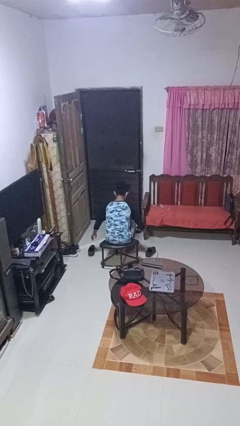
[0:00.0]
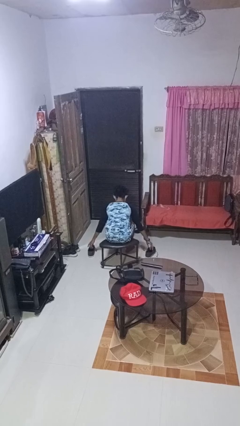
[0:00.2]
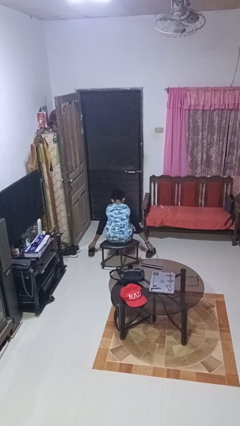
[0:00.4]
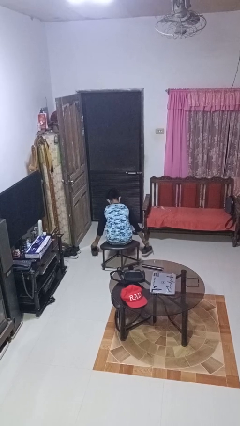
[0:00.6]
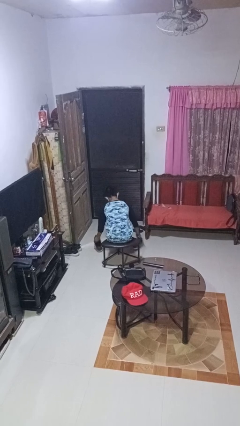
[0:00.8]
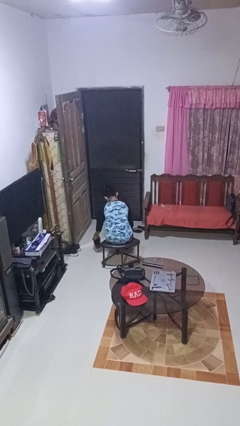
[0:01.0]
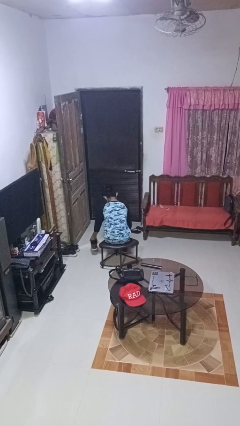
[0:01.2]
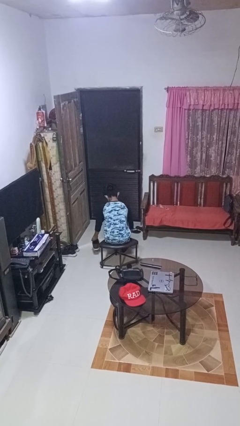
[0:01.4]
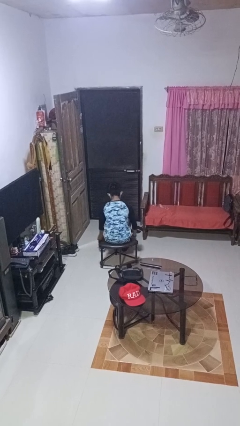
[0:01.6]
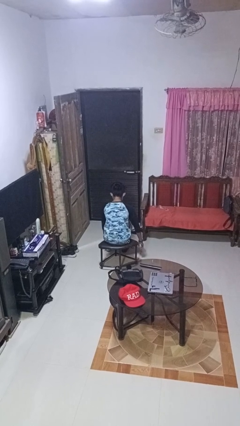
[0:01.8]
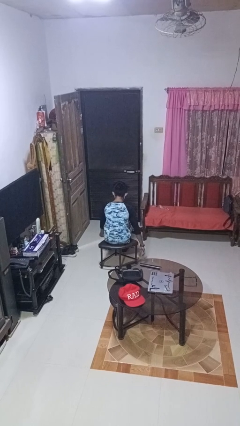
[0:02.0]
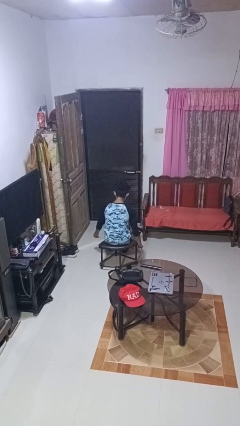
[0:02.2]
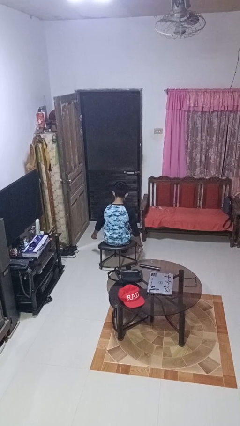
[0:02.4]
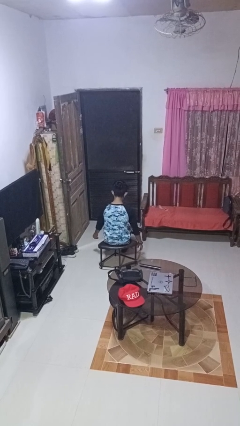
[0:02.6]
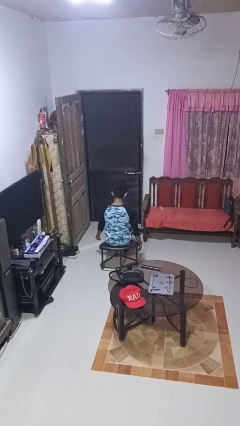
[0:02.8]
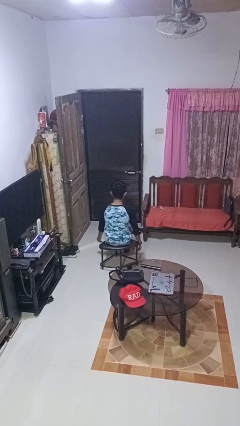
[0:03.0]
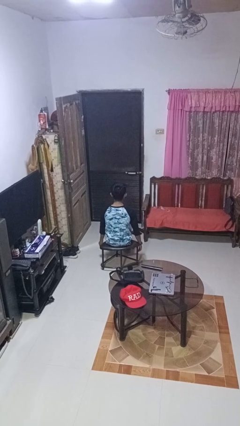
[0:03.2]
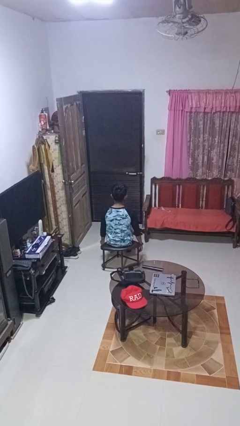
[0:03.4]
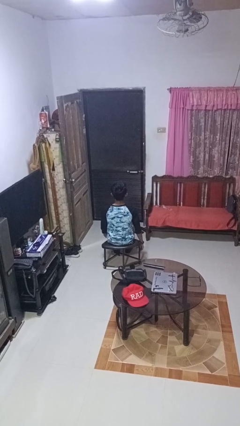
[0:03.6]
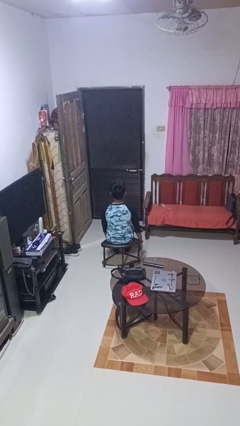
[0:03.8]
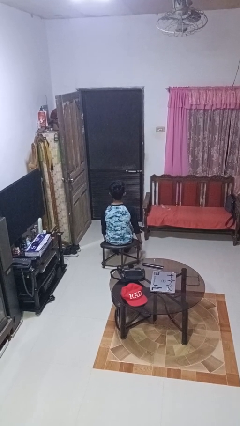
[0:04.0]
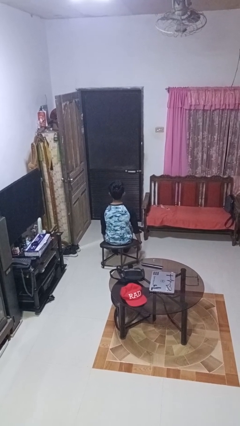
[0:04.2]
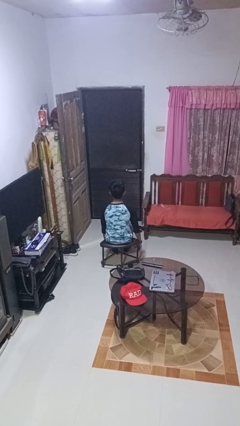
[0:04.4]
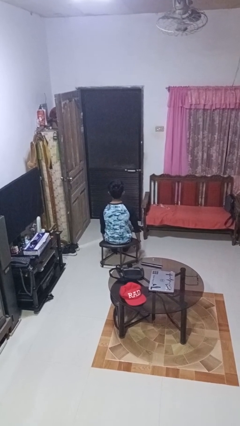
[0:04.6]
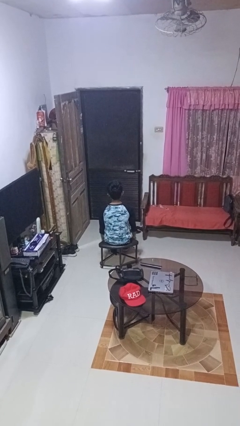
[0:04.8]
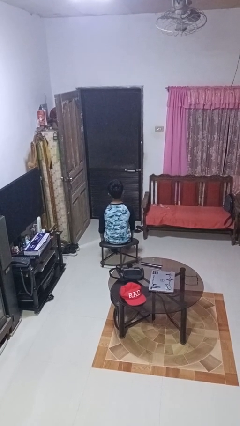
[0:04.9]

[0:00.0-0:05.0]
person puts on shoes

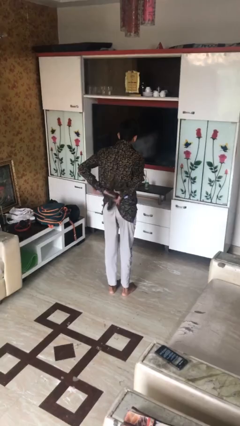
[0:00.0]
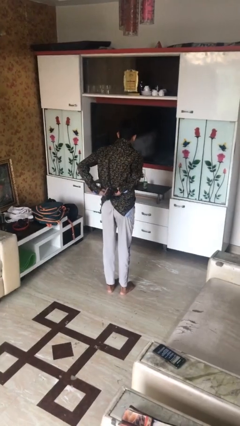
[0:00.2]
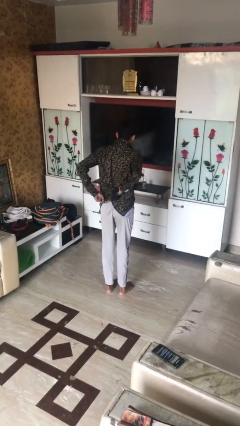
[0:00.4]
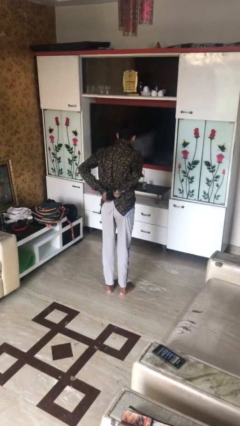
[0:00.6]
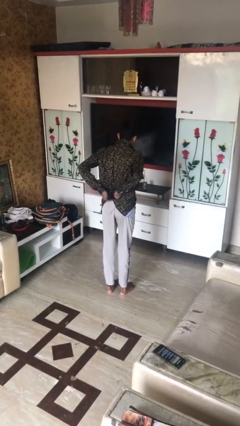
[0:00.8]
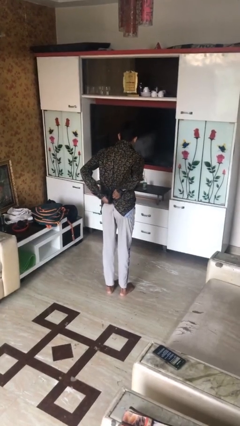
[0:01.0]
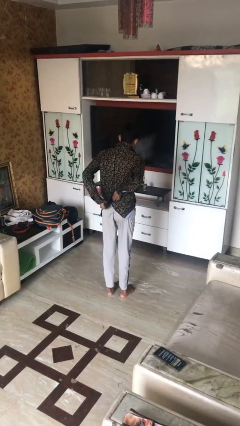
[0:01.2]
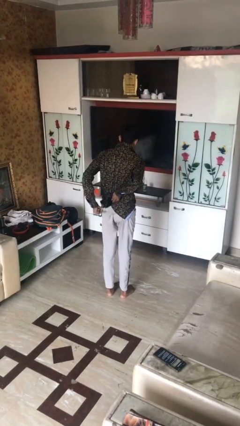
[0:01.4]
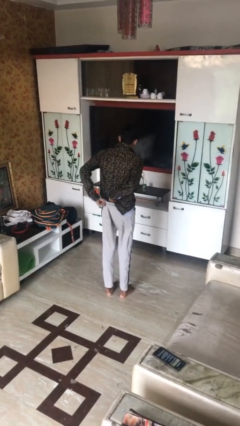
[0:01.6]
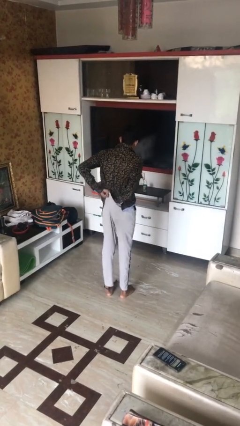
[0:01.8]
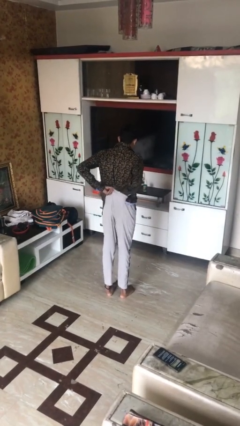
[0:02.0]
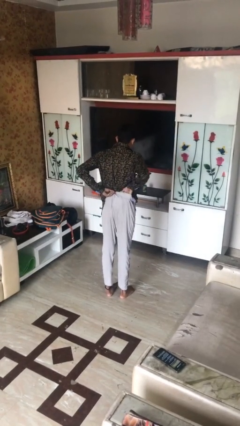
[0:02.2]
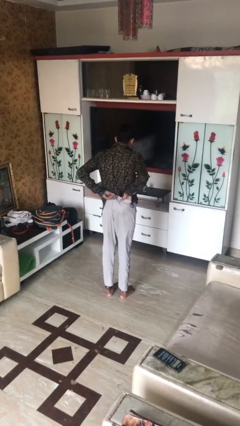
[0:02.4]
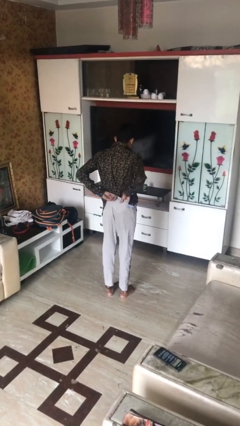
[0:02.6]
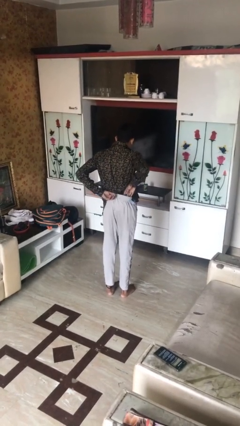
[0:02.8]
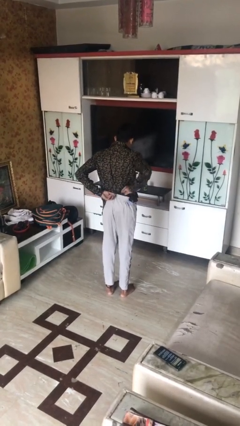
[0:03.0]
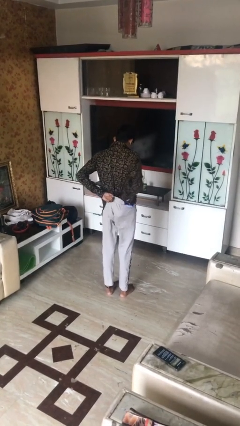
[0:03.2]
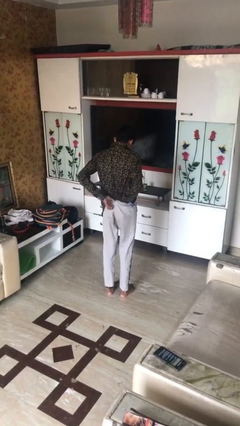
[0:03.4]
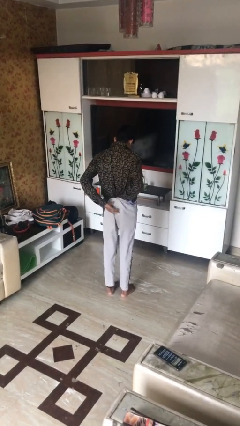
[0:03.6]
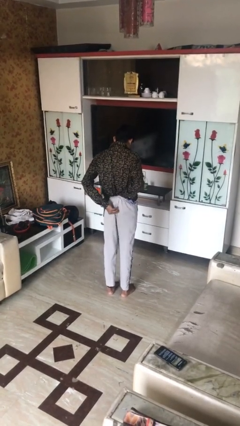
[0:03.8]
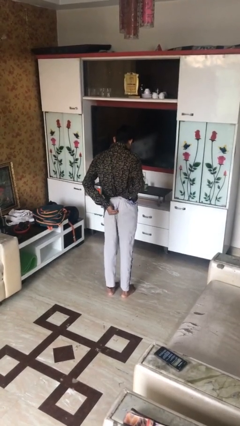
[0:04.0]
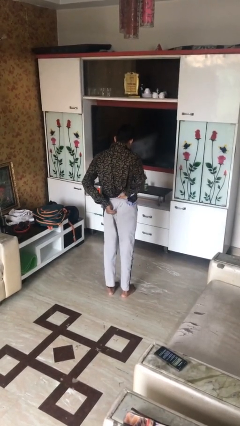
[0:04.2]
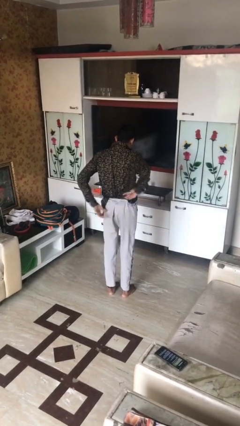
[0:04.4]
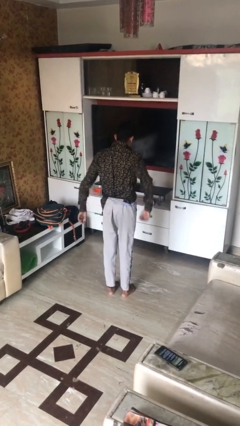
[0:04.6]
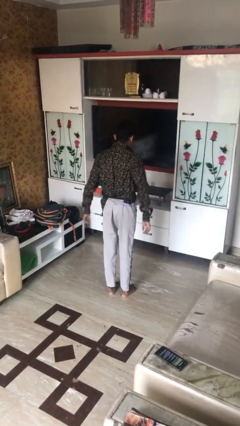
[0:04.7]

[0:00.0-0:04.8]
person tucks in shirt

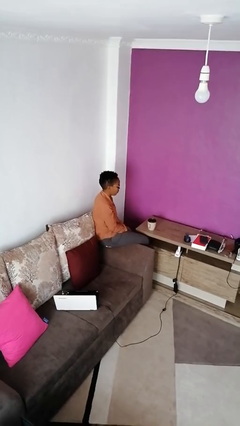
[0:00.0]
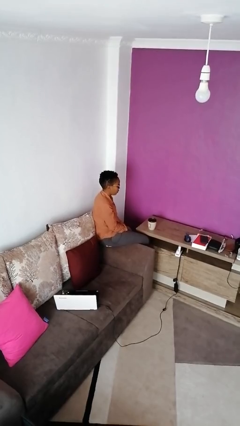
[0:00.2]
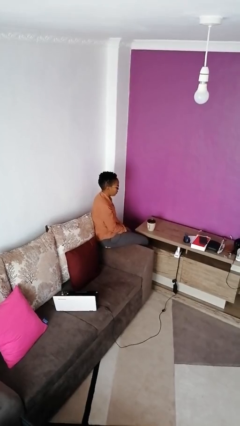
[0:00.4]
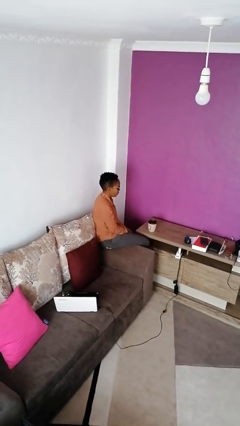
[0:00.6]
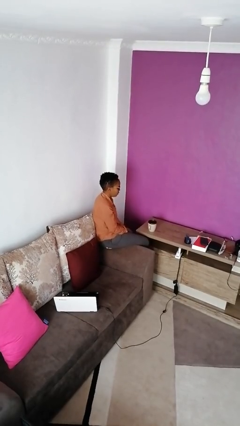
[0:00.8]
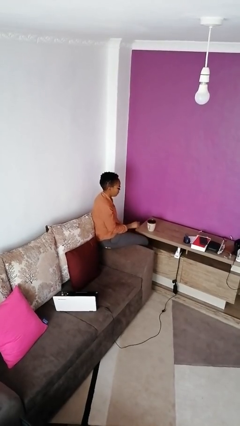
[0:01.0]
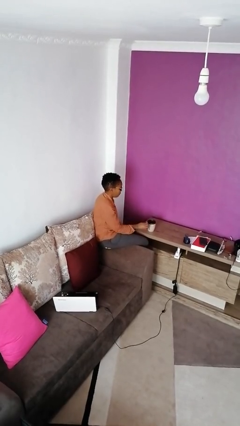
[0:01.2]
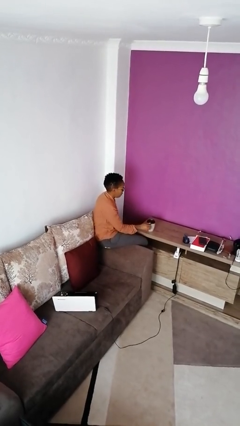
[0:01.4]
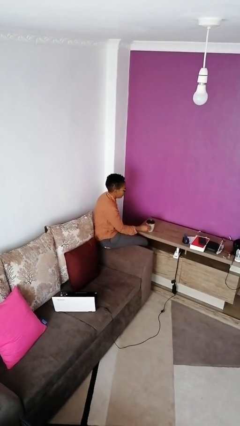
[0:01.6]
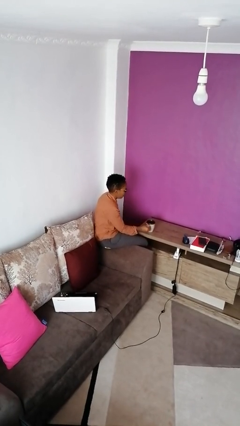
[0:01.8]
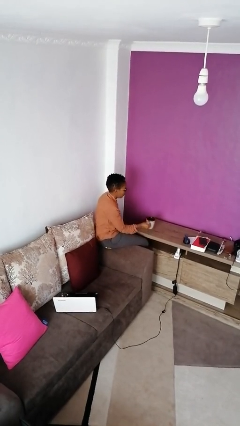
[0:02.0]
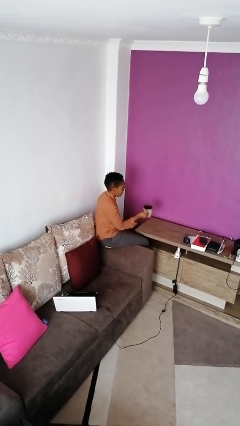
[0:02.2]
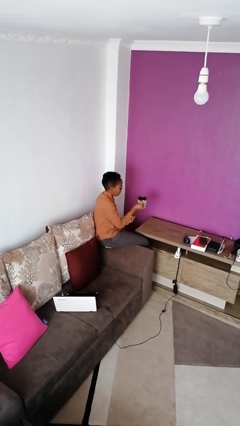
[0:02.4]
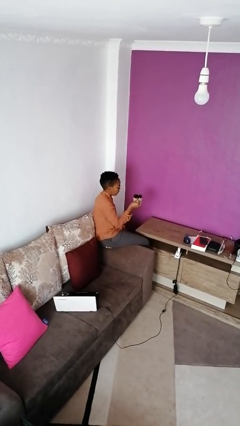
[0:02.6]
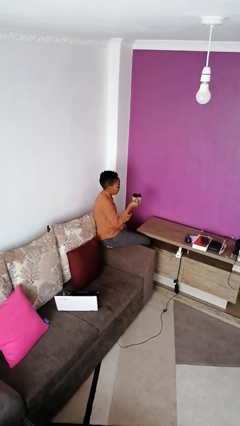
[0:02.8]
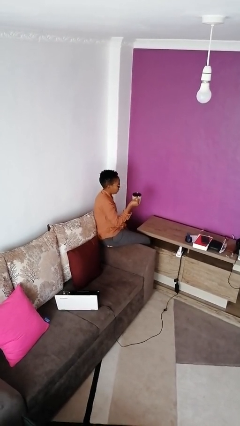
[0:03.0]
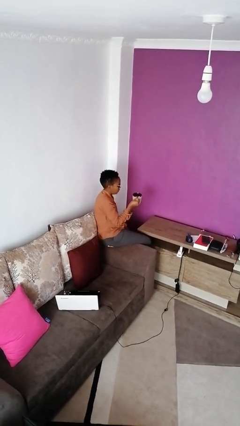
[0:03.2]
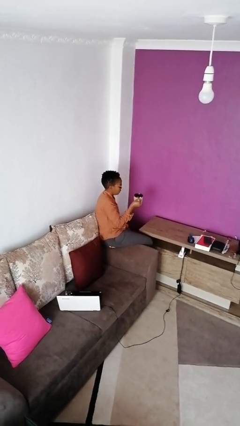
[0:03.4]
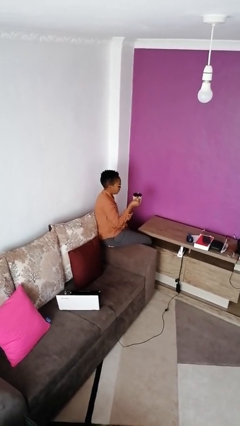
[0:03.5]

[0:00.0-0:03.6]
person picks up object from table

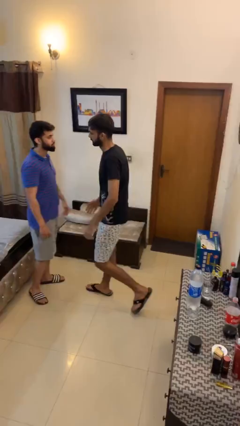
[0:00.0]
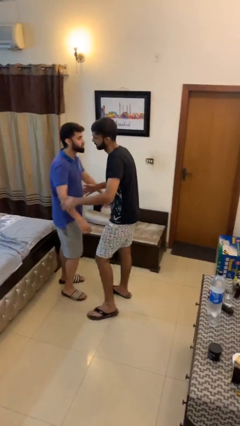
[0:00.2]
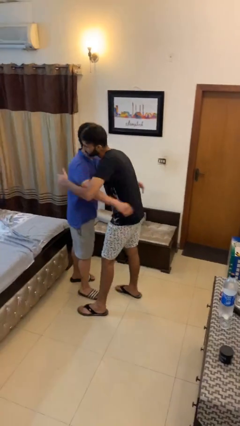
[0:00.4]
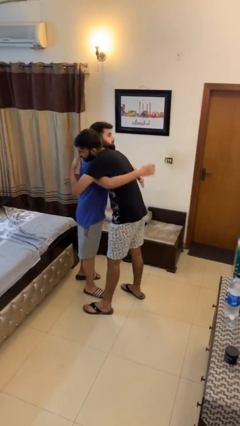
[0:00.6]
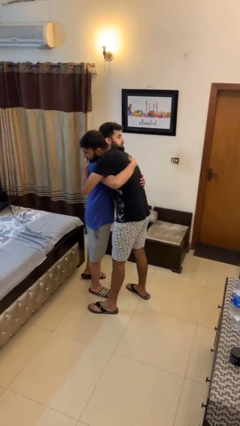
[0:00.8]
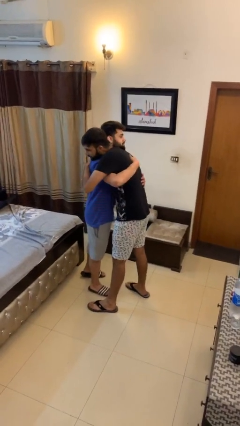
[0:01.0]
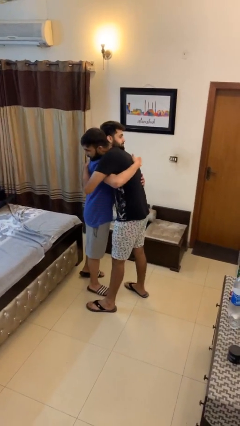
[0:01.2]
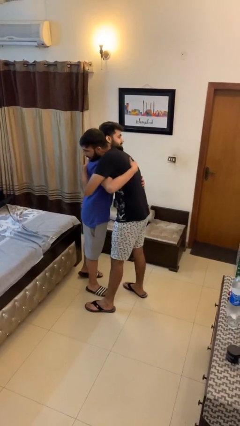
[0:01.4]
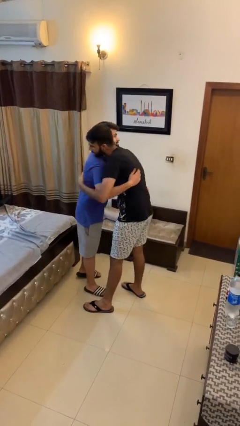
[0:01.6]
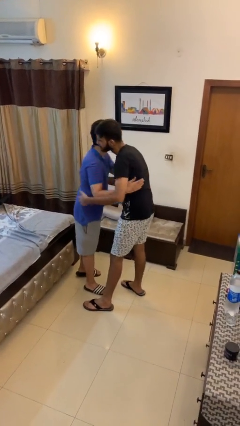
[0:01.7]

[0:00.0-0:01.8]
person embraces person

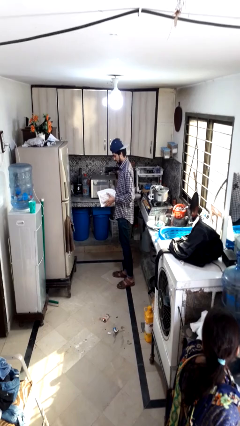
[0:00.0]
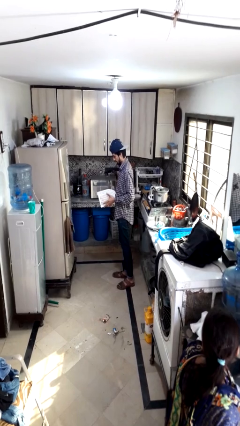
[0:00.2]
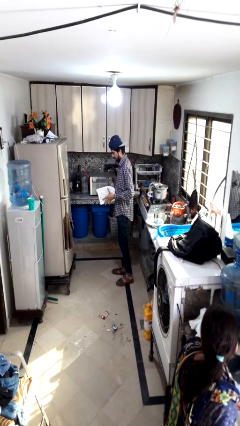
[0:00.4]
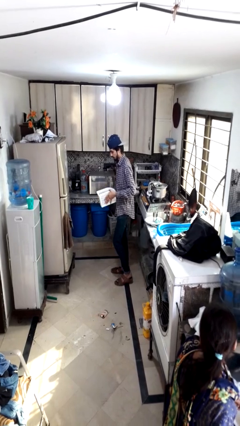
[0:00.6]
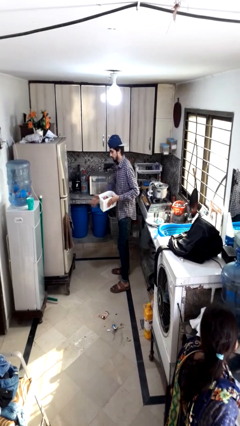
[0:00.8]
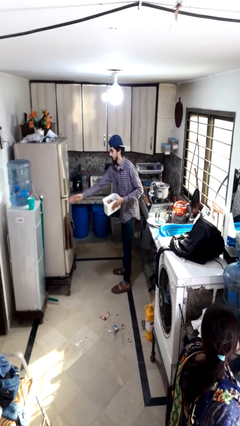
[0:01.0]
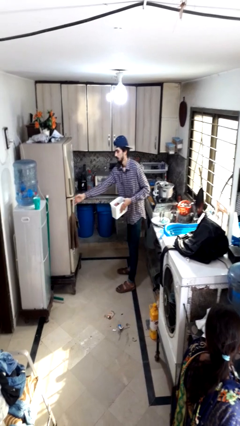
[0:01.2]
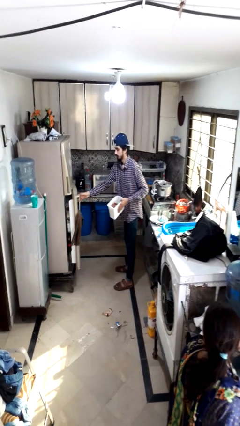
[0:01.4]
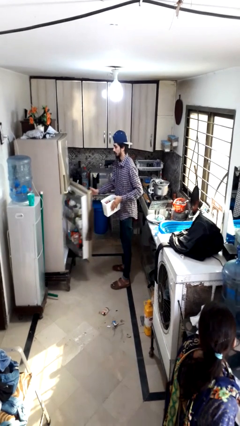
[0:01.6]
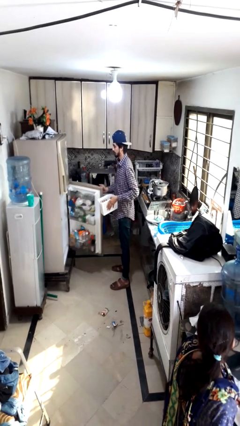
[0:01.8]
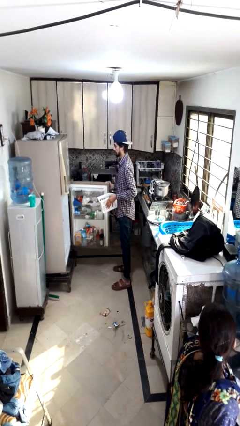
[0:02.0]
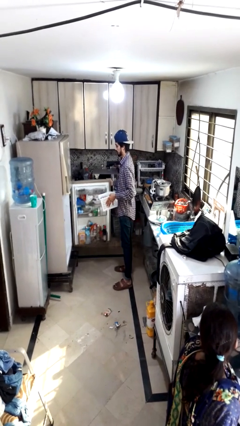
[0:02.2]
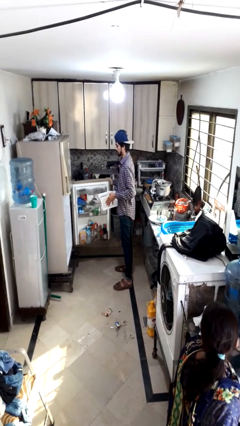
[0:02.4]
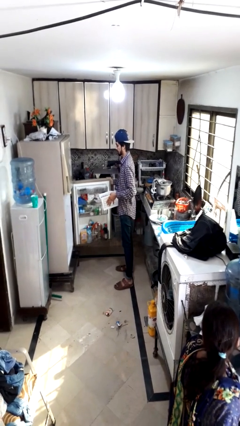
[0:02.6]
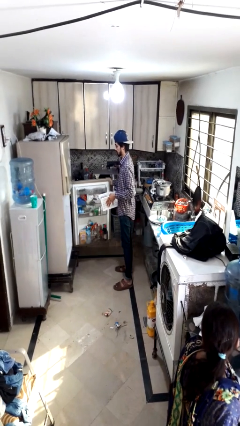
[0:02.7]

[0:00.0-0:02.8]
person opens refrigerator
